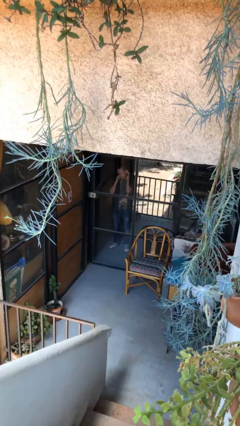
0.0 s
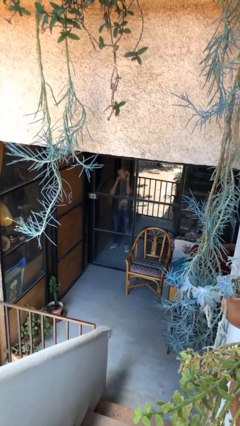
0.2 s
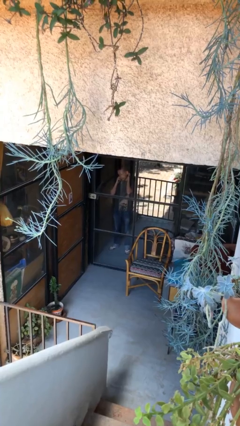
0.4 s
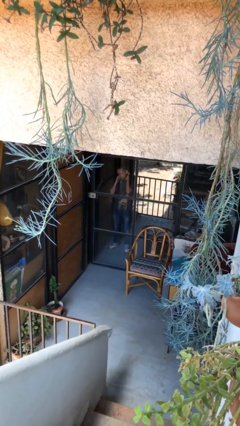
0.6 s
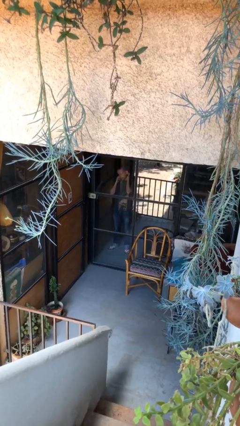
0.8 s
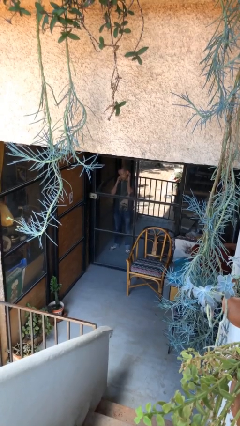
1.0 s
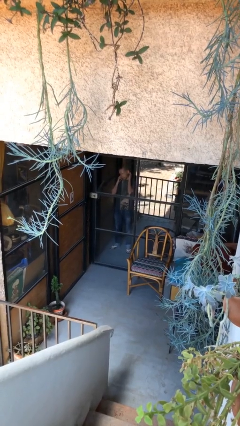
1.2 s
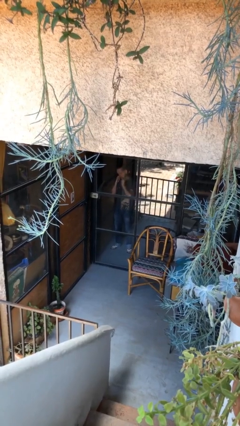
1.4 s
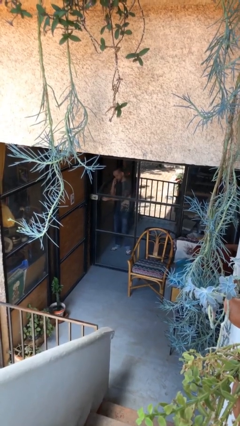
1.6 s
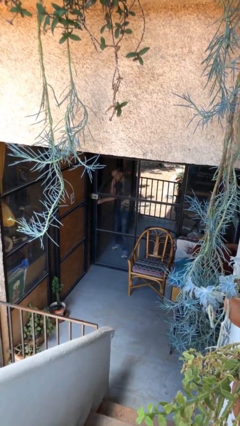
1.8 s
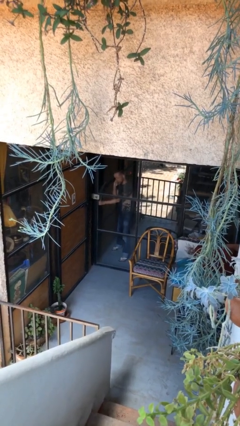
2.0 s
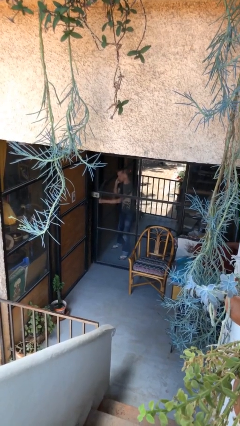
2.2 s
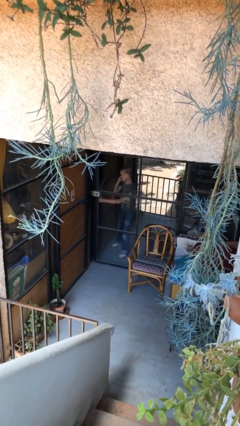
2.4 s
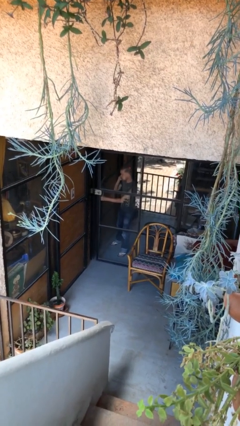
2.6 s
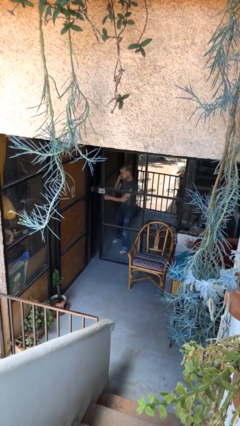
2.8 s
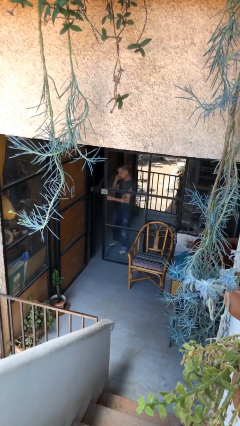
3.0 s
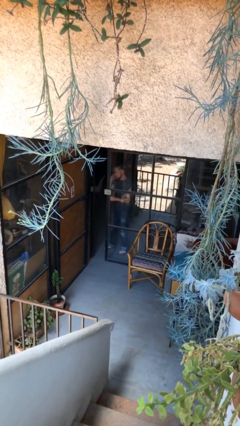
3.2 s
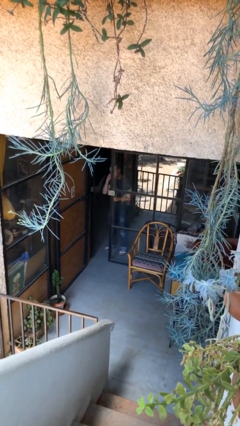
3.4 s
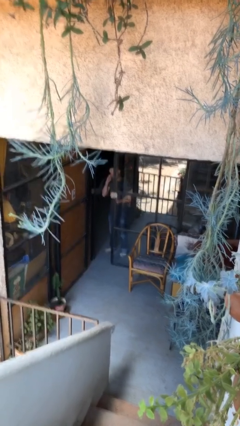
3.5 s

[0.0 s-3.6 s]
person opens facility door

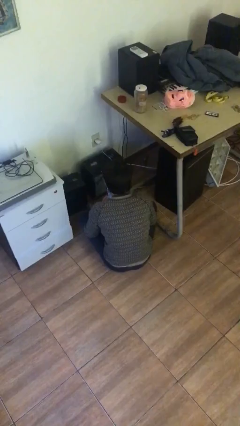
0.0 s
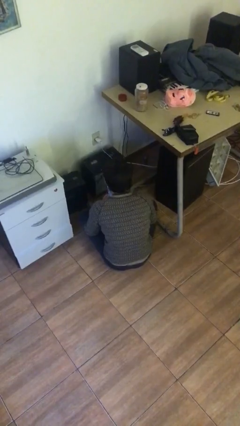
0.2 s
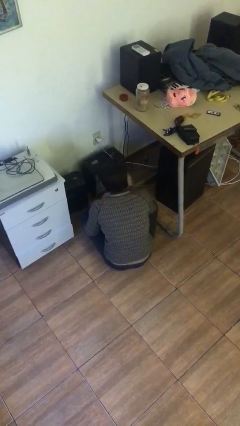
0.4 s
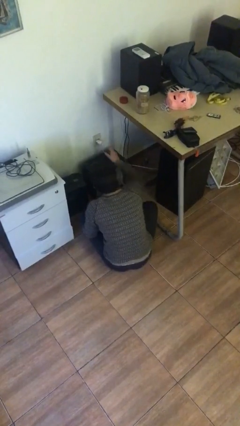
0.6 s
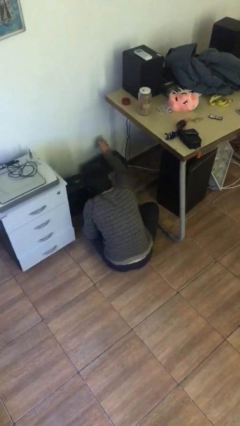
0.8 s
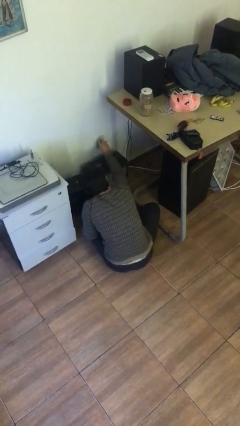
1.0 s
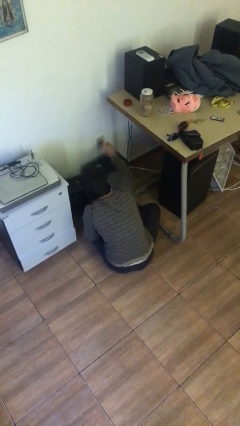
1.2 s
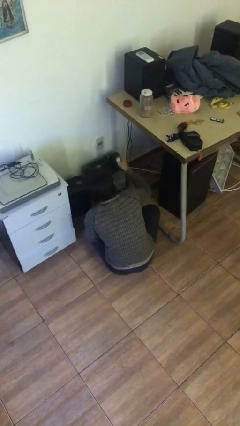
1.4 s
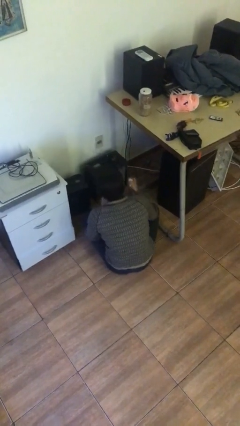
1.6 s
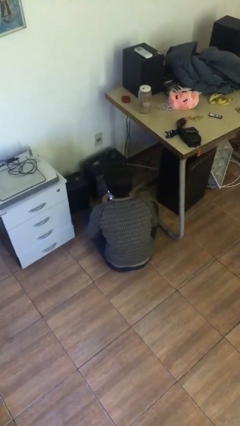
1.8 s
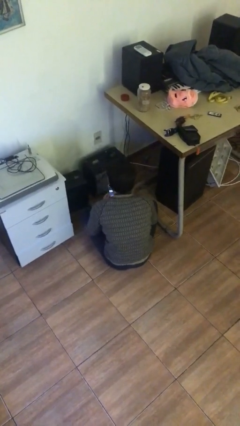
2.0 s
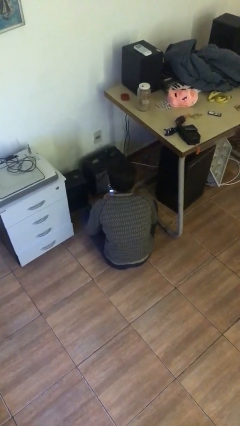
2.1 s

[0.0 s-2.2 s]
person unplugs from electrical socket

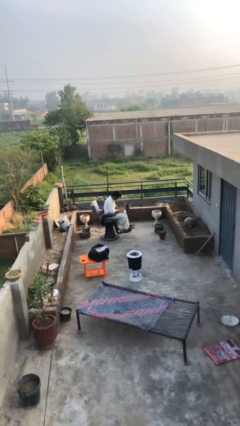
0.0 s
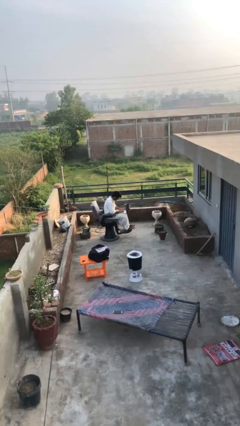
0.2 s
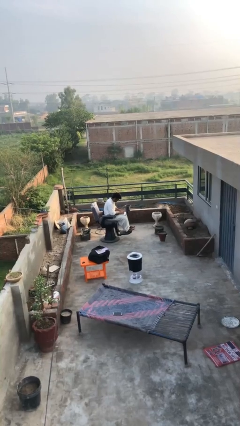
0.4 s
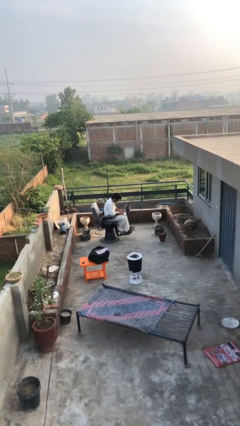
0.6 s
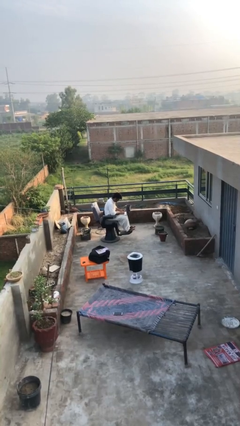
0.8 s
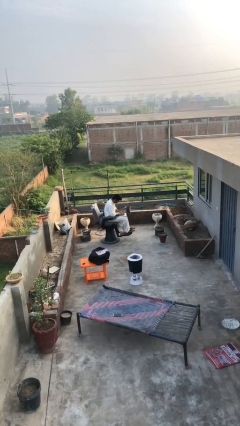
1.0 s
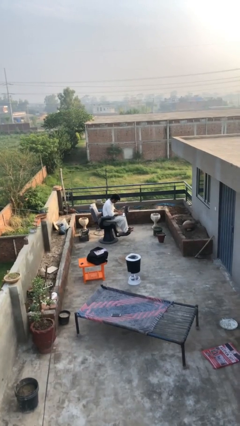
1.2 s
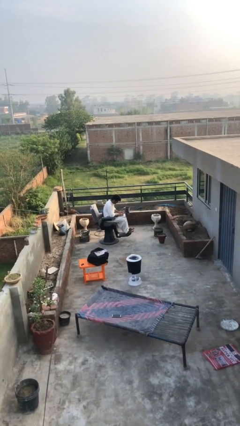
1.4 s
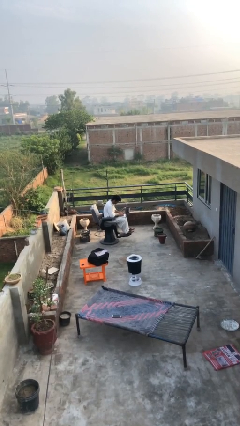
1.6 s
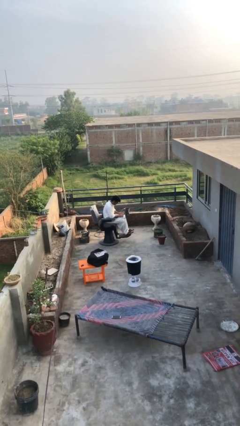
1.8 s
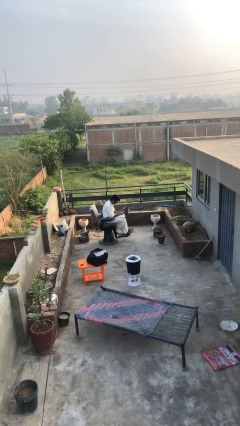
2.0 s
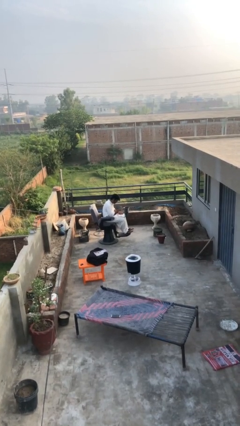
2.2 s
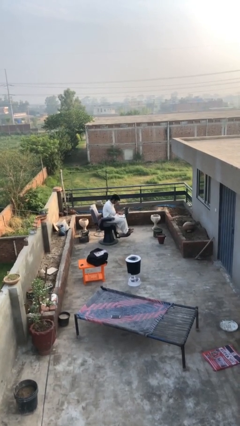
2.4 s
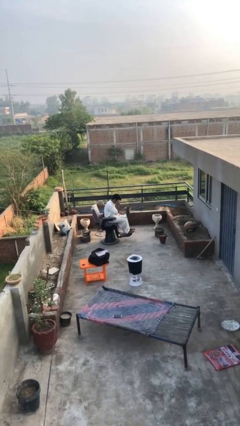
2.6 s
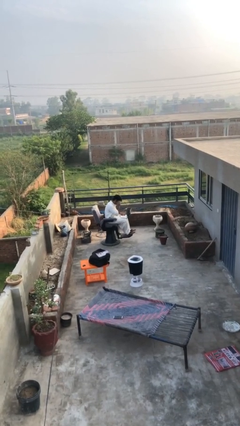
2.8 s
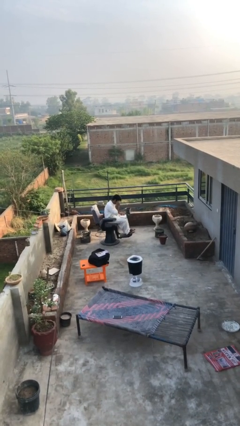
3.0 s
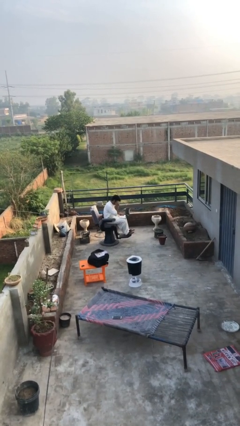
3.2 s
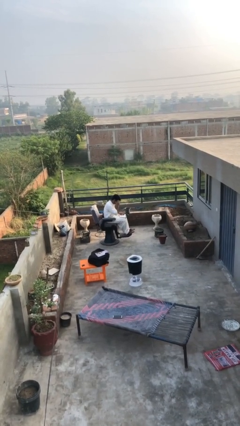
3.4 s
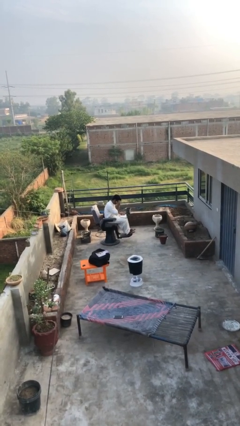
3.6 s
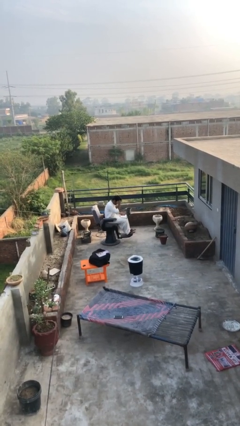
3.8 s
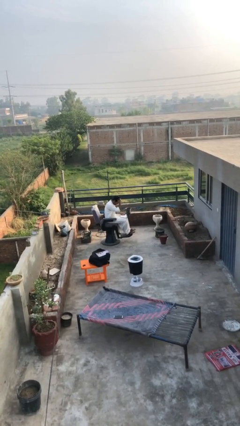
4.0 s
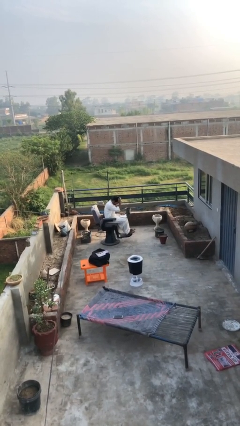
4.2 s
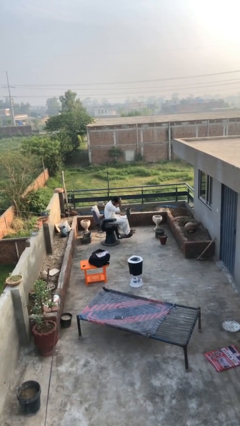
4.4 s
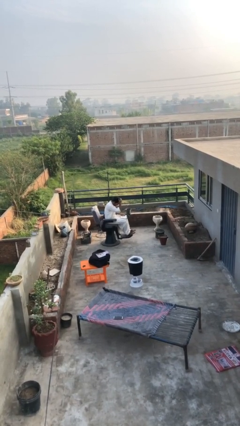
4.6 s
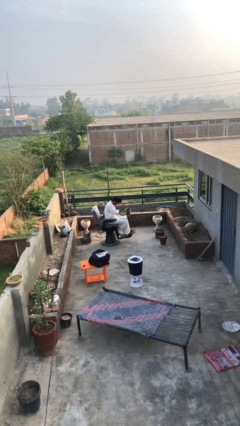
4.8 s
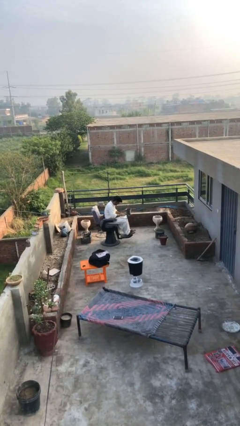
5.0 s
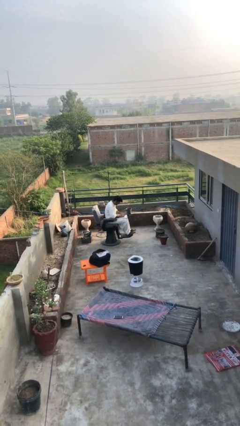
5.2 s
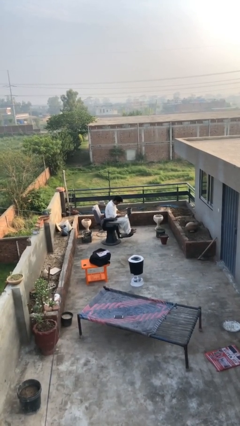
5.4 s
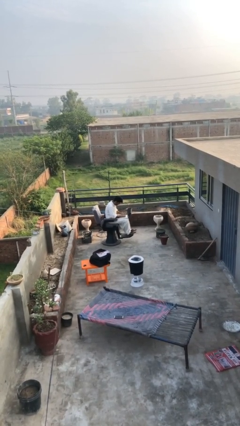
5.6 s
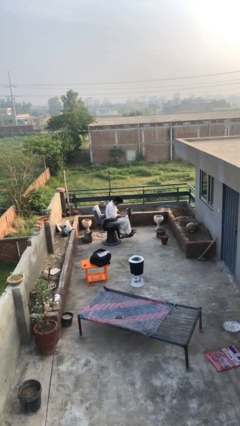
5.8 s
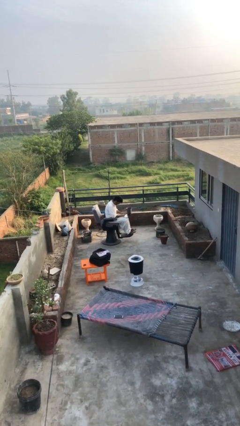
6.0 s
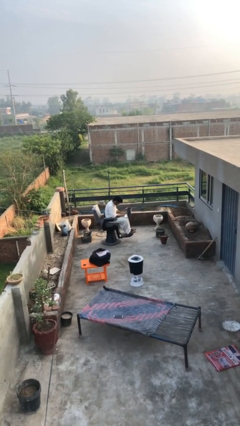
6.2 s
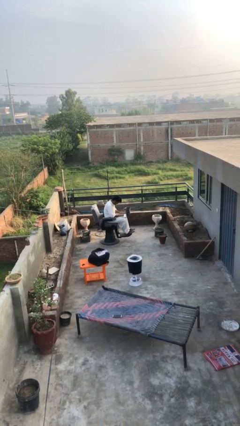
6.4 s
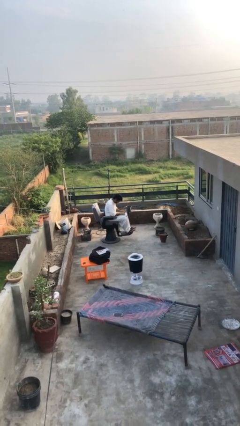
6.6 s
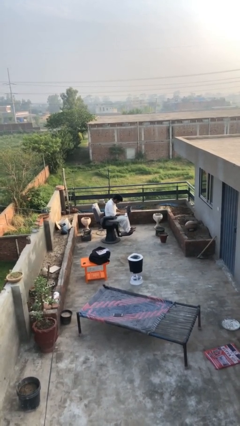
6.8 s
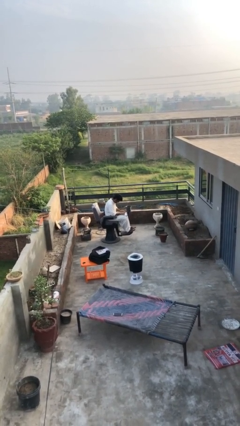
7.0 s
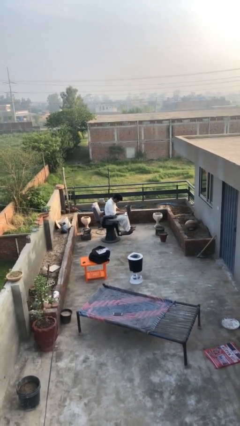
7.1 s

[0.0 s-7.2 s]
person interacts with laptop

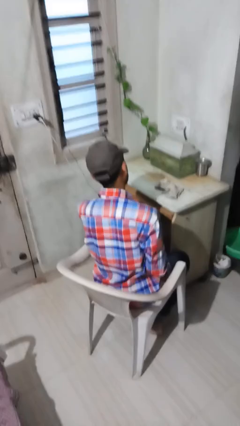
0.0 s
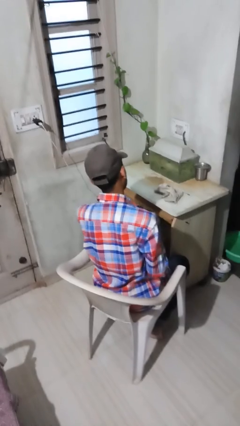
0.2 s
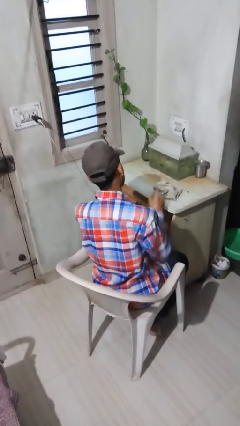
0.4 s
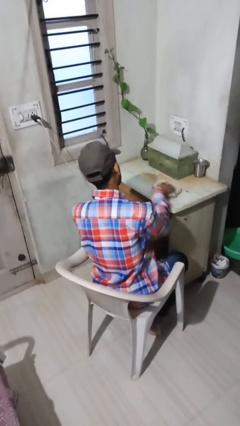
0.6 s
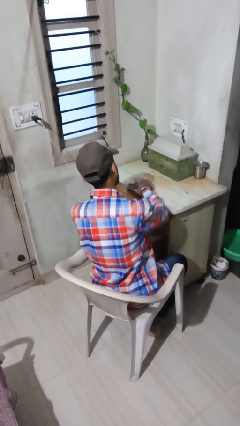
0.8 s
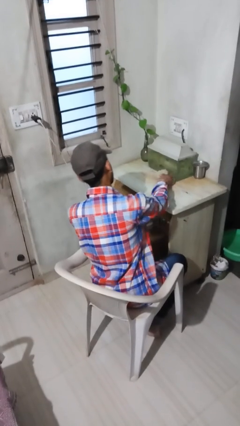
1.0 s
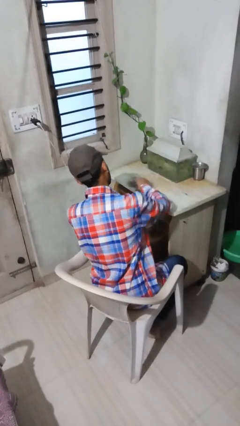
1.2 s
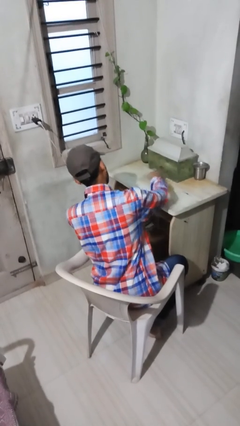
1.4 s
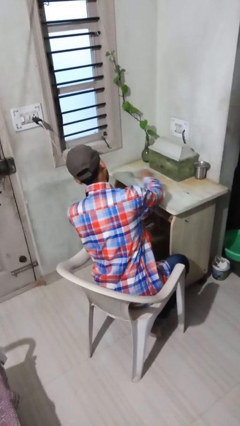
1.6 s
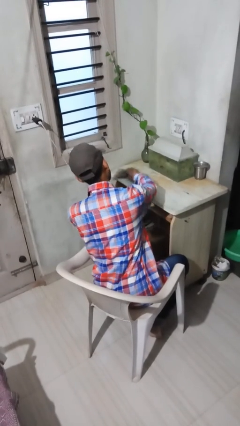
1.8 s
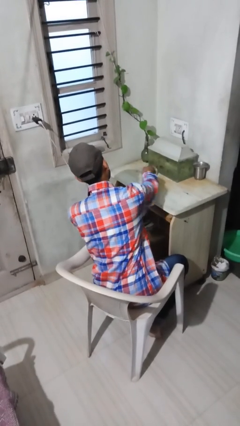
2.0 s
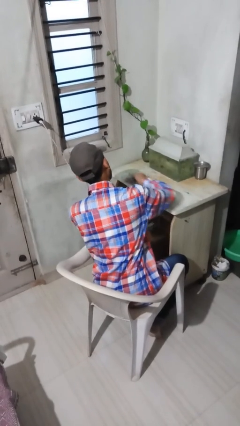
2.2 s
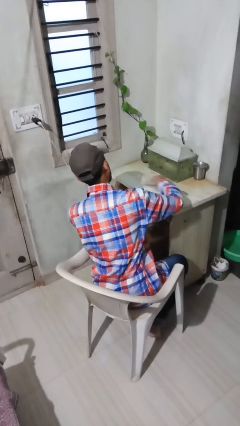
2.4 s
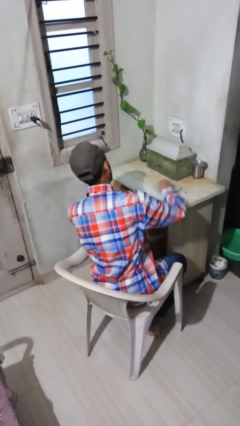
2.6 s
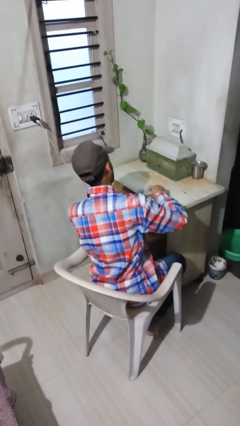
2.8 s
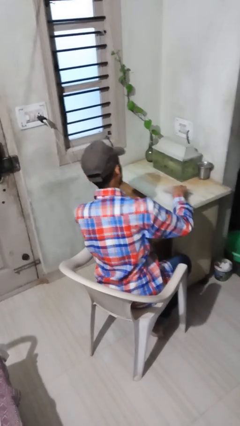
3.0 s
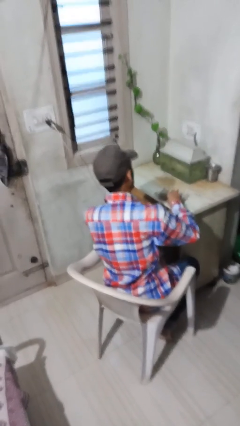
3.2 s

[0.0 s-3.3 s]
person cleans table with rag

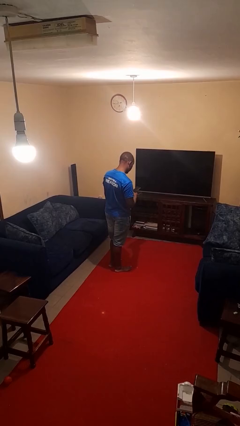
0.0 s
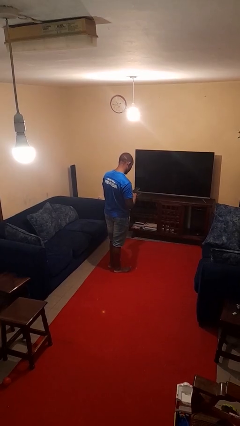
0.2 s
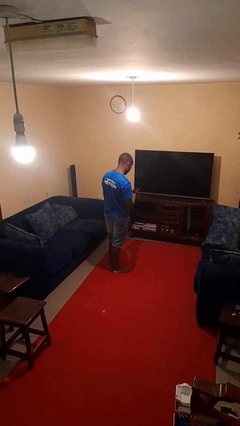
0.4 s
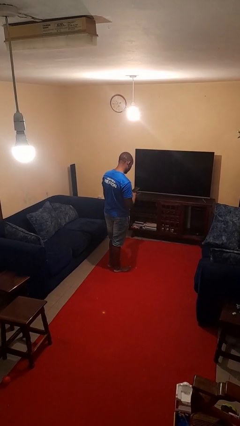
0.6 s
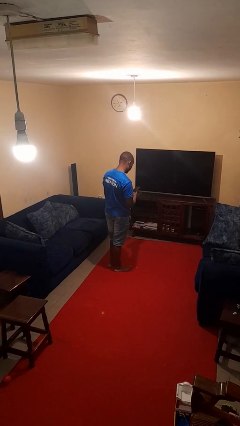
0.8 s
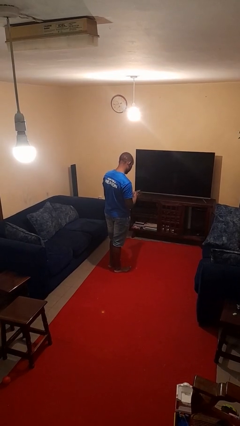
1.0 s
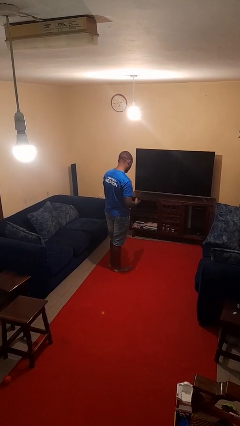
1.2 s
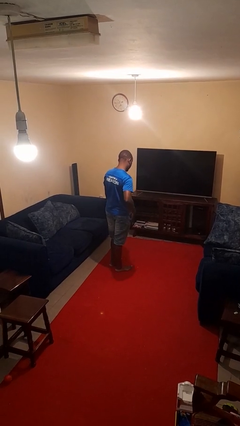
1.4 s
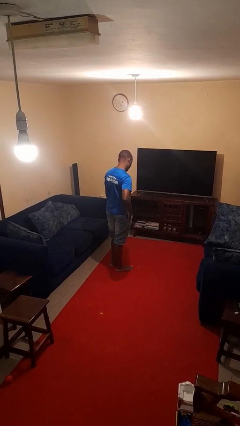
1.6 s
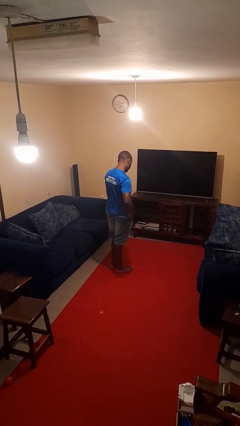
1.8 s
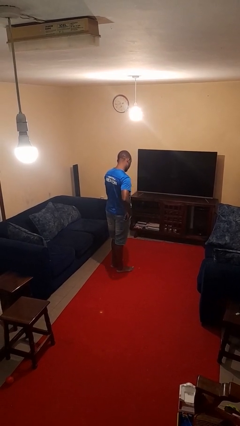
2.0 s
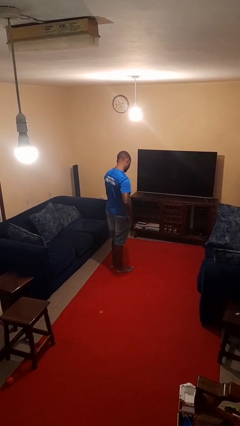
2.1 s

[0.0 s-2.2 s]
person puts phone into pocket
